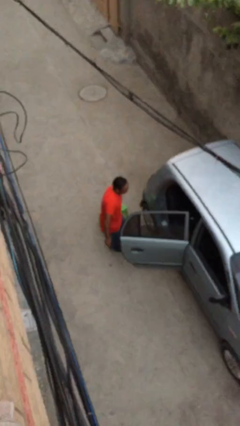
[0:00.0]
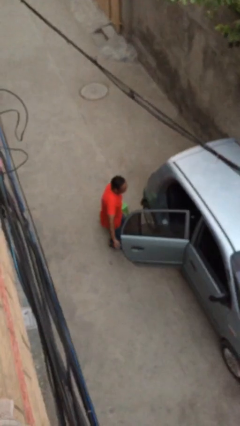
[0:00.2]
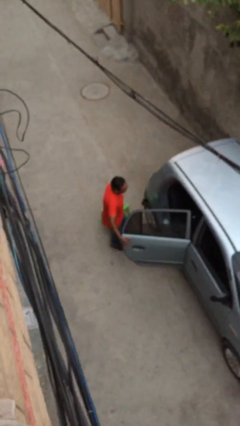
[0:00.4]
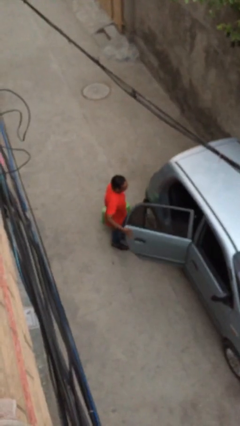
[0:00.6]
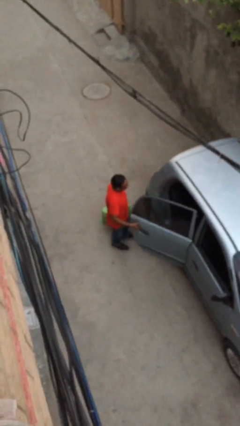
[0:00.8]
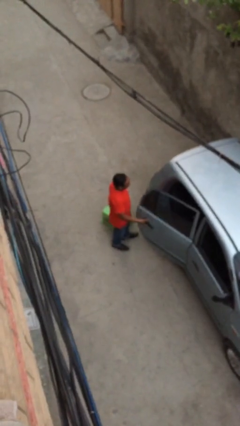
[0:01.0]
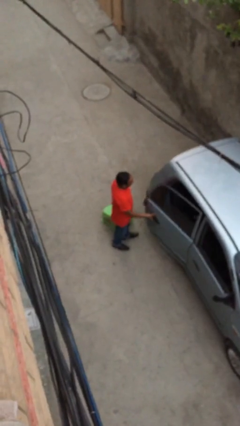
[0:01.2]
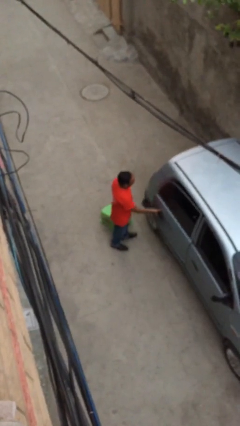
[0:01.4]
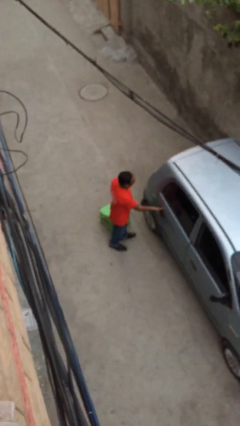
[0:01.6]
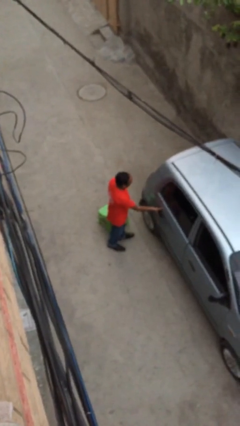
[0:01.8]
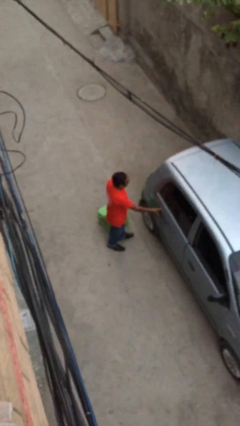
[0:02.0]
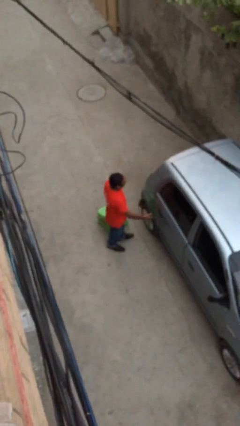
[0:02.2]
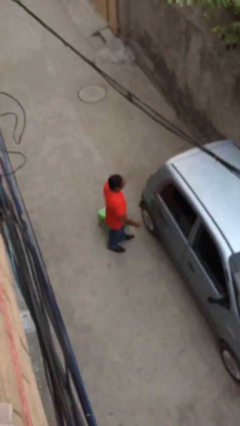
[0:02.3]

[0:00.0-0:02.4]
person closes car door

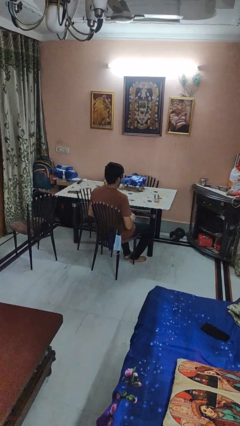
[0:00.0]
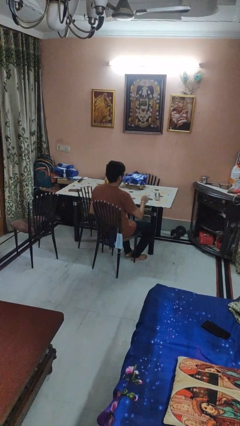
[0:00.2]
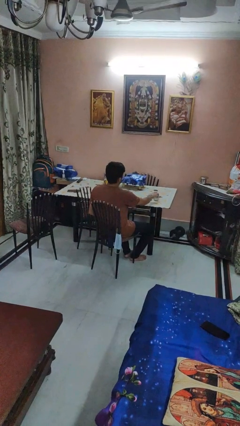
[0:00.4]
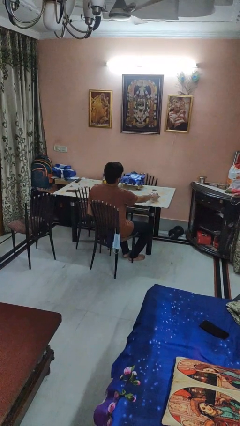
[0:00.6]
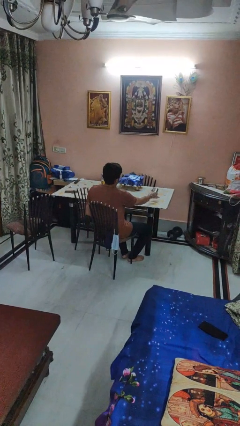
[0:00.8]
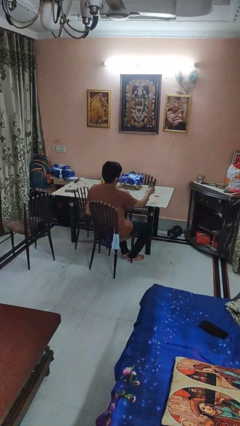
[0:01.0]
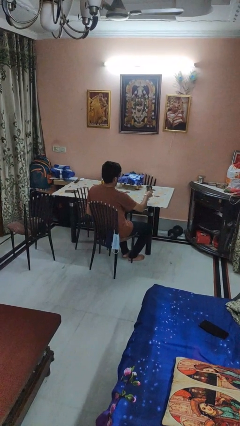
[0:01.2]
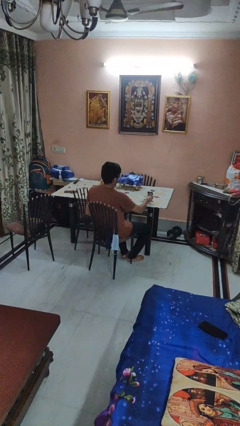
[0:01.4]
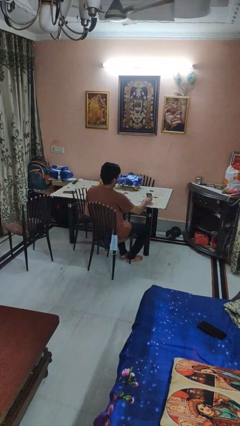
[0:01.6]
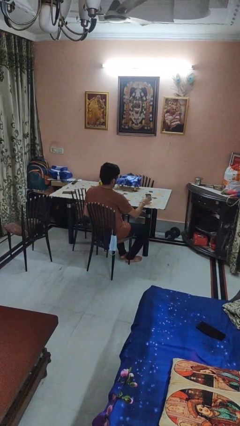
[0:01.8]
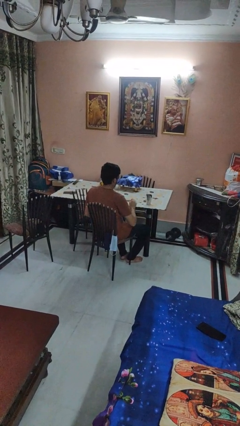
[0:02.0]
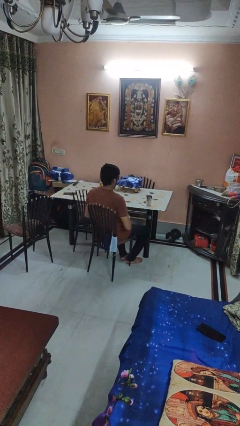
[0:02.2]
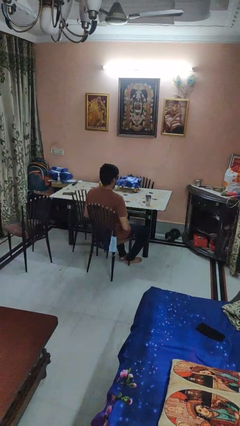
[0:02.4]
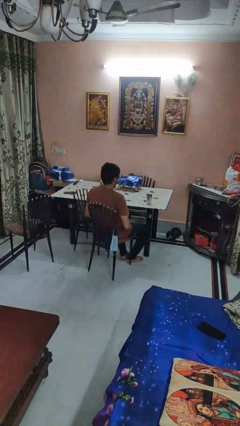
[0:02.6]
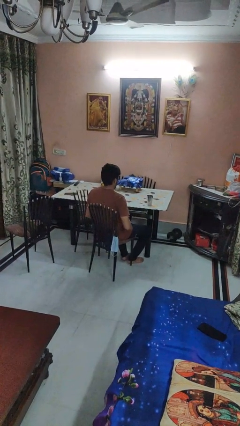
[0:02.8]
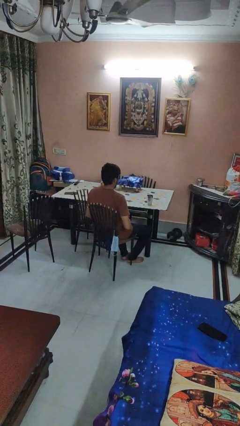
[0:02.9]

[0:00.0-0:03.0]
person sets upright glass

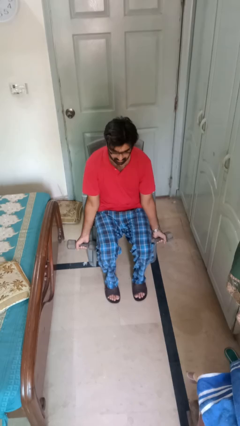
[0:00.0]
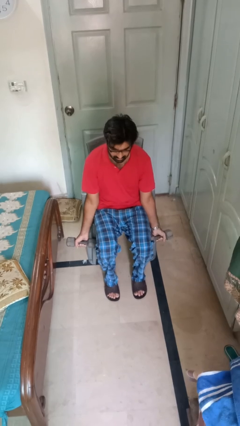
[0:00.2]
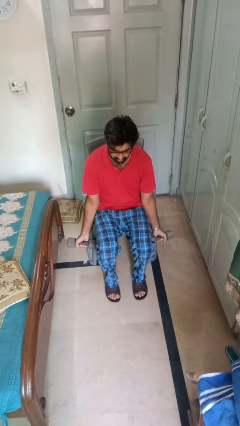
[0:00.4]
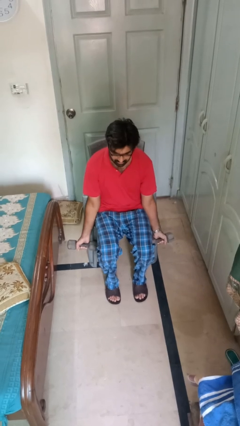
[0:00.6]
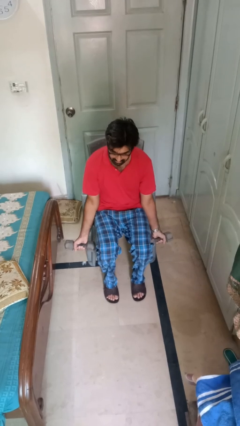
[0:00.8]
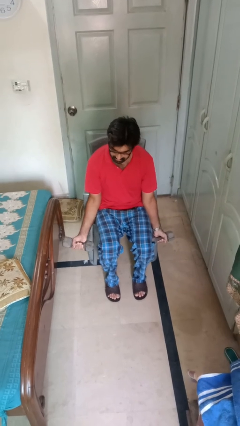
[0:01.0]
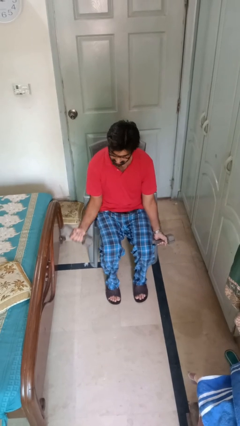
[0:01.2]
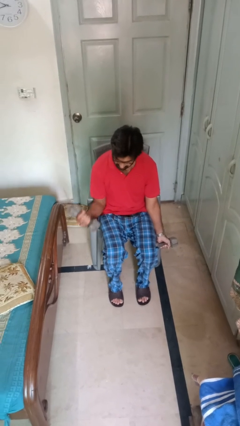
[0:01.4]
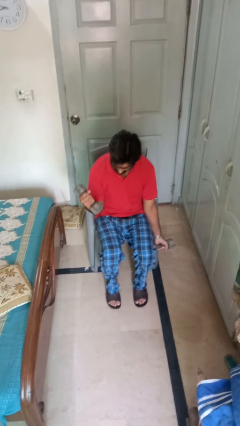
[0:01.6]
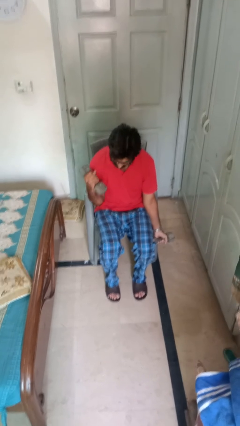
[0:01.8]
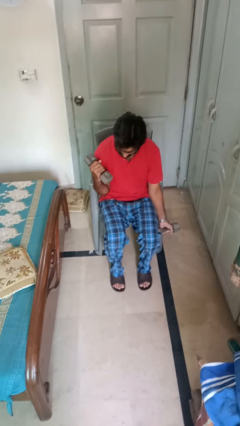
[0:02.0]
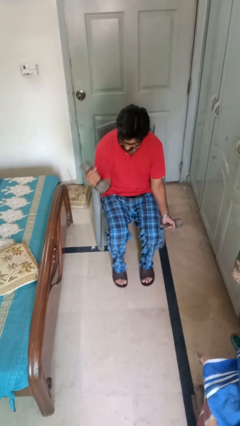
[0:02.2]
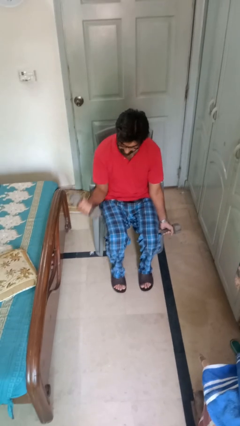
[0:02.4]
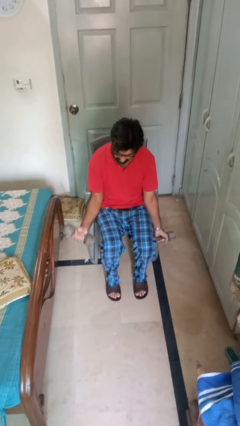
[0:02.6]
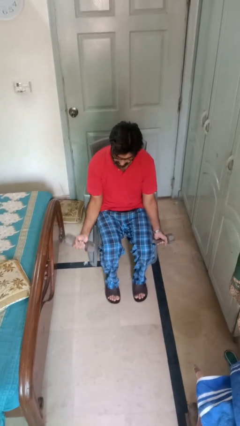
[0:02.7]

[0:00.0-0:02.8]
person lifts dumbbells

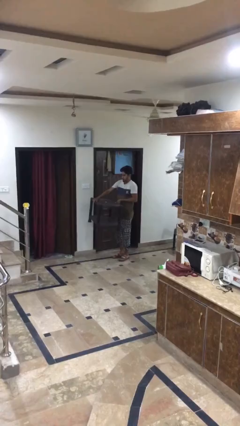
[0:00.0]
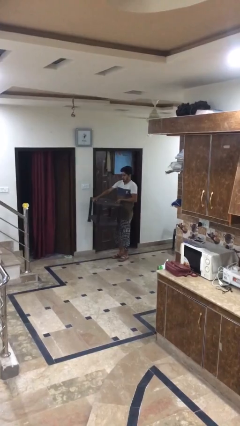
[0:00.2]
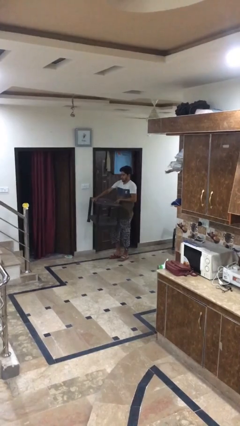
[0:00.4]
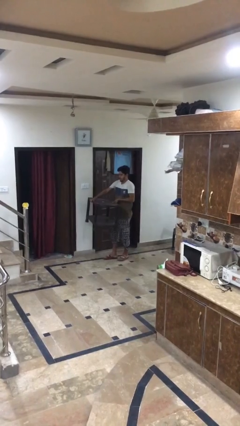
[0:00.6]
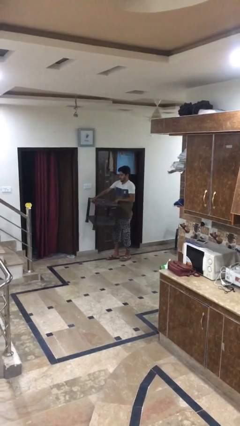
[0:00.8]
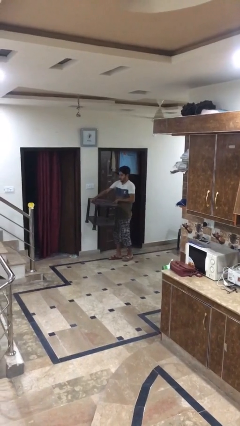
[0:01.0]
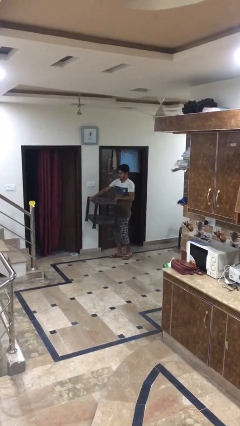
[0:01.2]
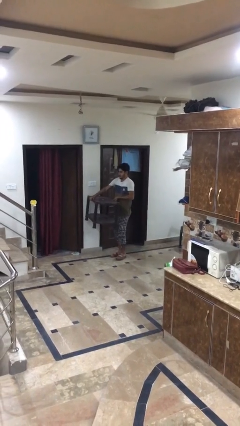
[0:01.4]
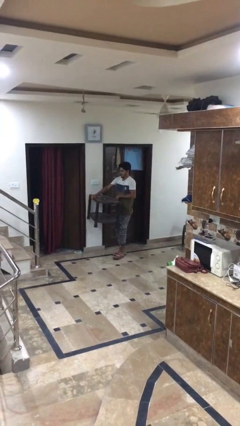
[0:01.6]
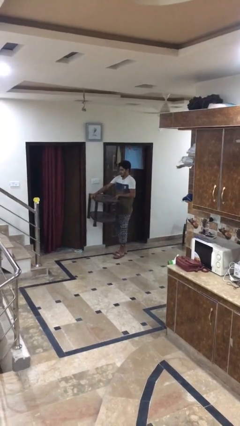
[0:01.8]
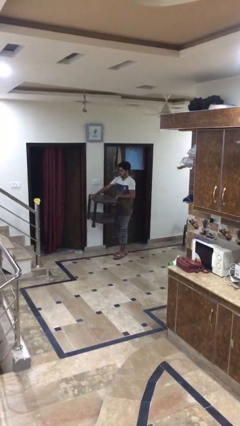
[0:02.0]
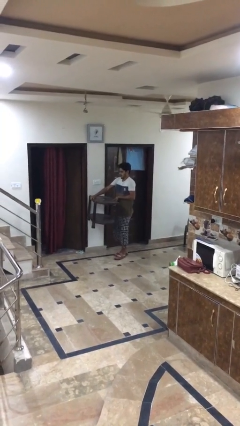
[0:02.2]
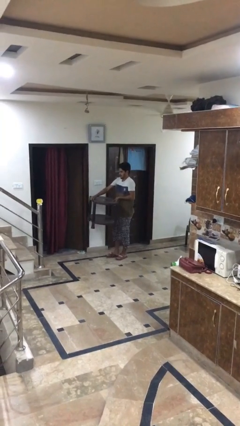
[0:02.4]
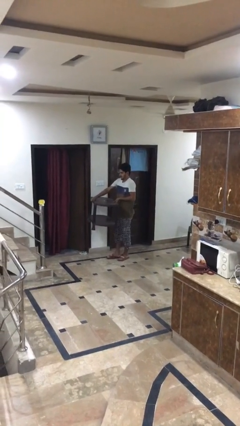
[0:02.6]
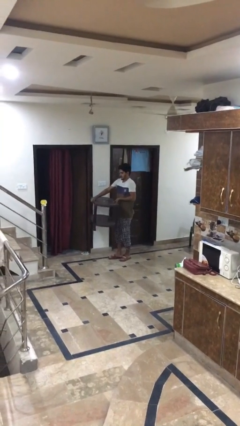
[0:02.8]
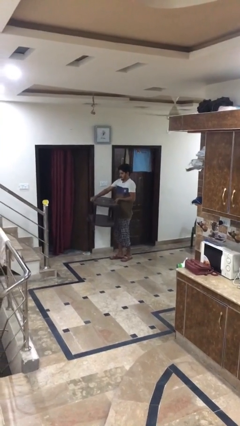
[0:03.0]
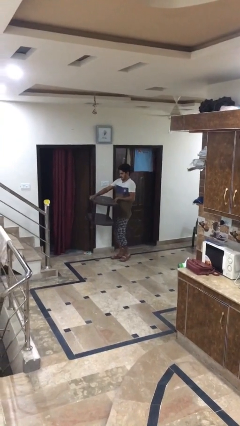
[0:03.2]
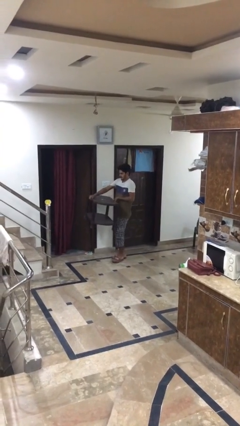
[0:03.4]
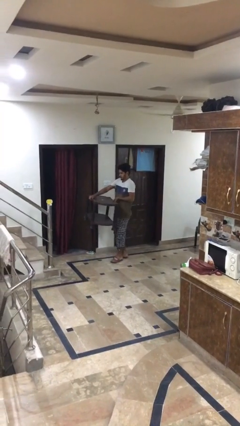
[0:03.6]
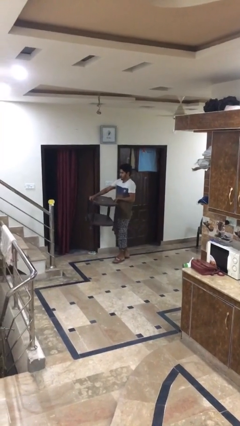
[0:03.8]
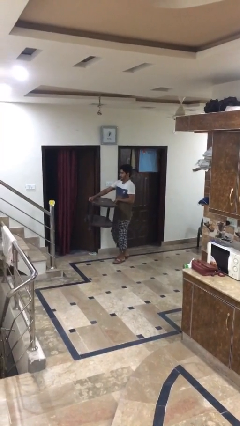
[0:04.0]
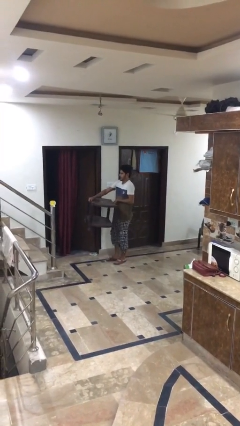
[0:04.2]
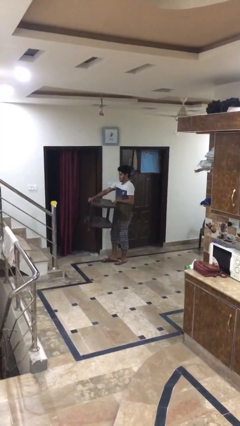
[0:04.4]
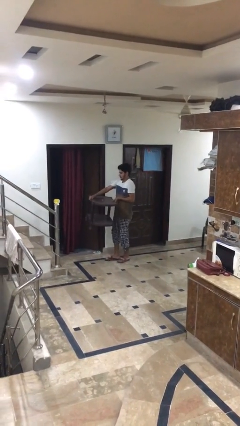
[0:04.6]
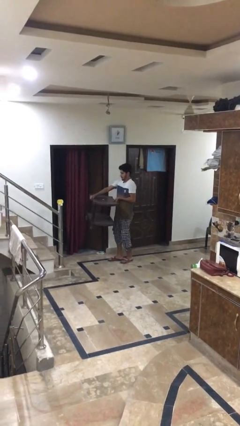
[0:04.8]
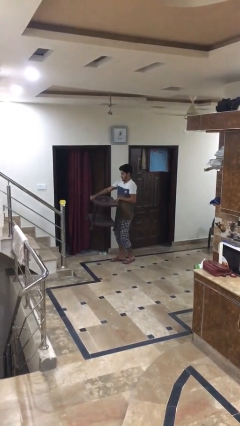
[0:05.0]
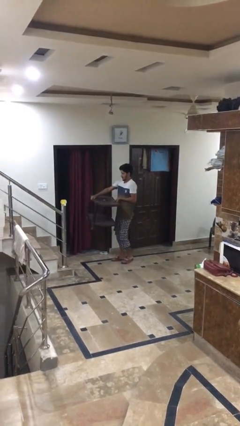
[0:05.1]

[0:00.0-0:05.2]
person carries heavy object

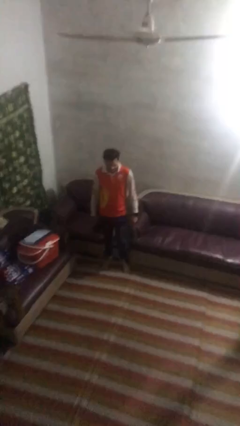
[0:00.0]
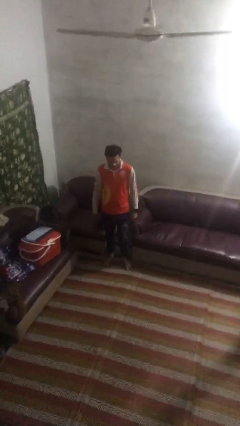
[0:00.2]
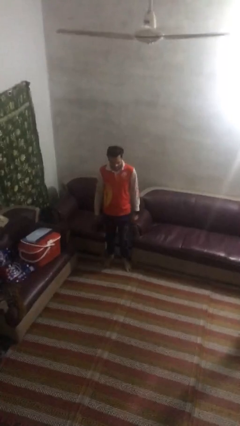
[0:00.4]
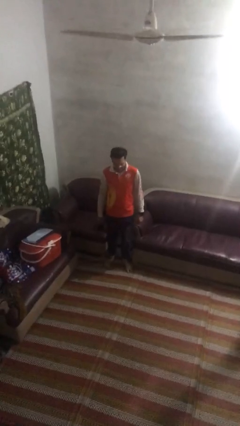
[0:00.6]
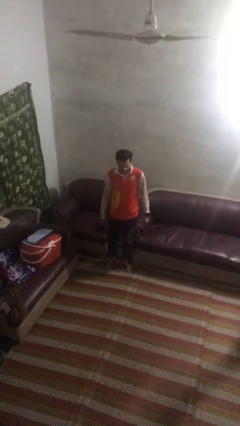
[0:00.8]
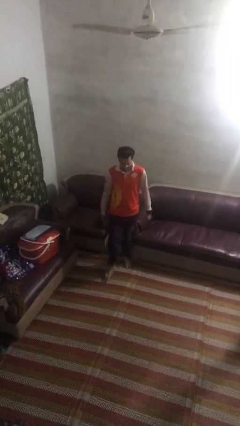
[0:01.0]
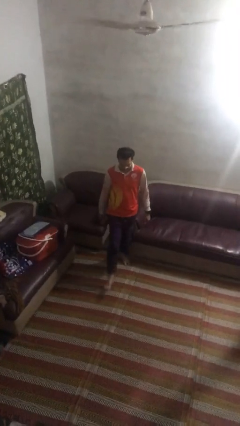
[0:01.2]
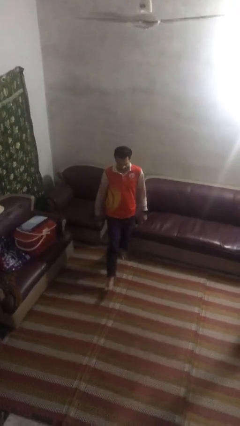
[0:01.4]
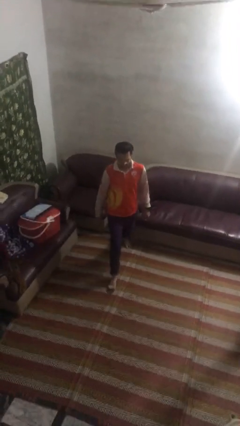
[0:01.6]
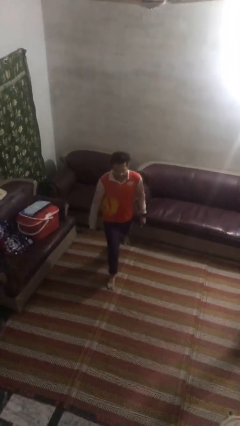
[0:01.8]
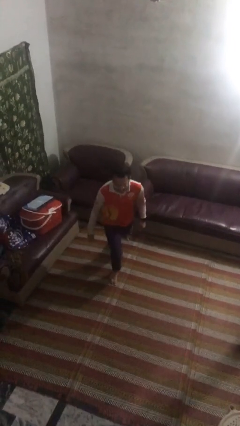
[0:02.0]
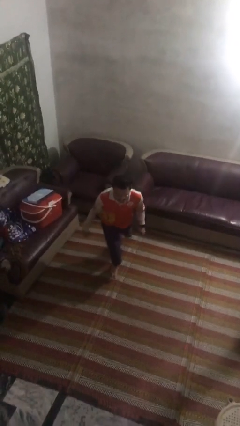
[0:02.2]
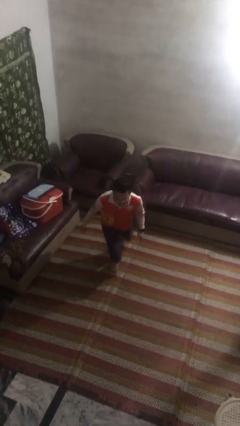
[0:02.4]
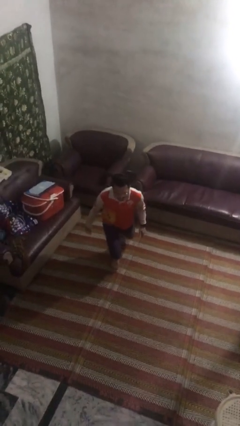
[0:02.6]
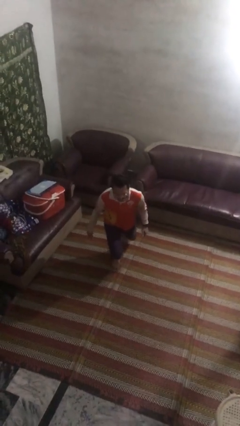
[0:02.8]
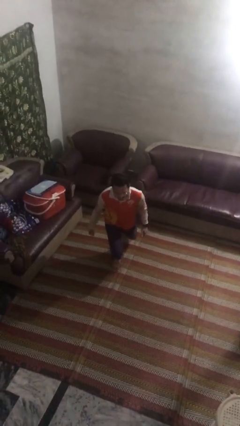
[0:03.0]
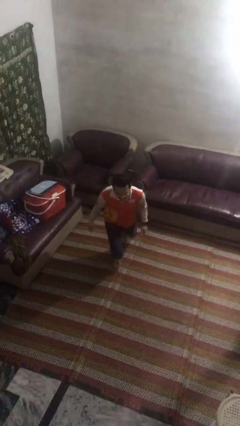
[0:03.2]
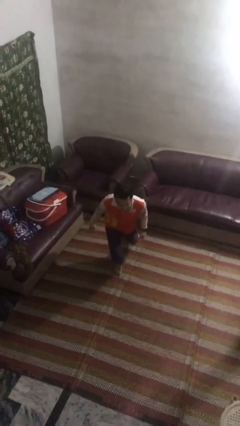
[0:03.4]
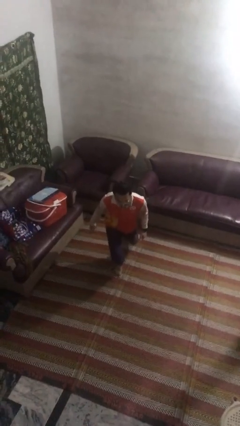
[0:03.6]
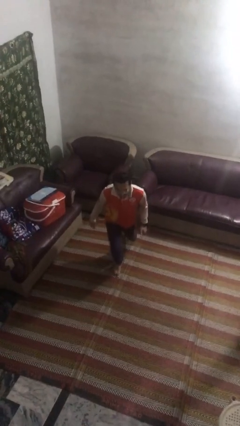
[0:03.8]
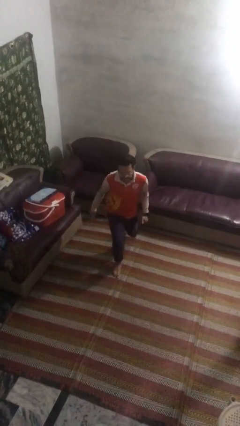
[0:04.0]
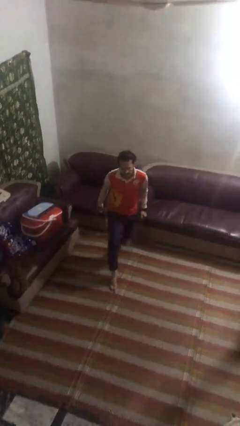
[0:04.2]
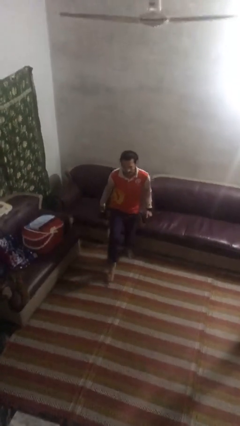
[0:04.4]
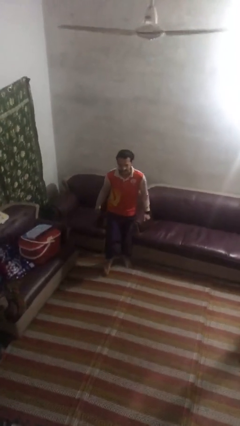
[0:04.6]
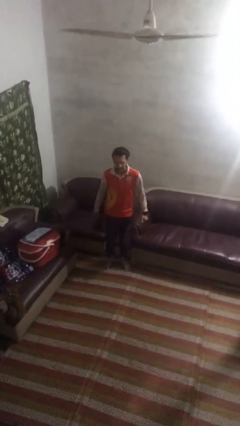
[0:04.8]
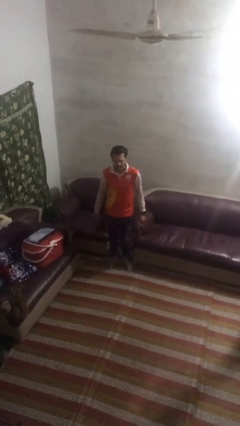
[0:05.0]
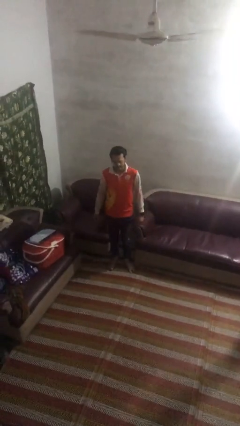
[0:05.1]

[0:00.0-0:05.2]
person exercises with lunges
